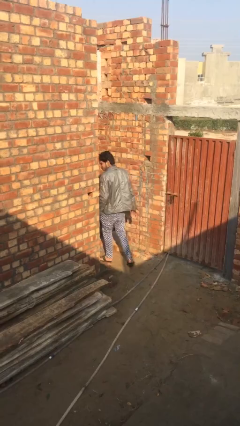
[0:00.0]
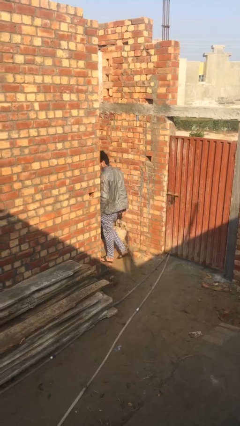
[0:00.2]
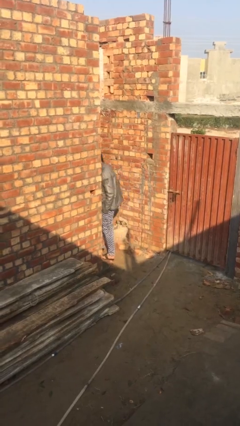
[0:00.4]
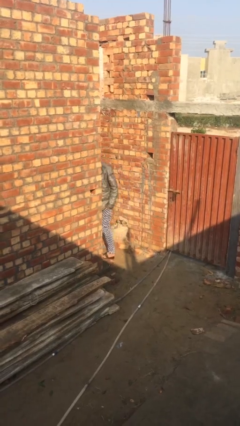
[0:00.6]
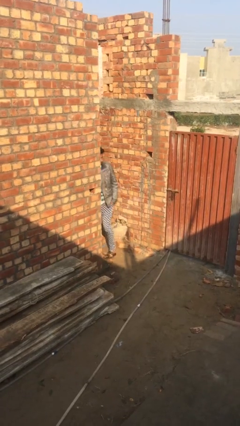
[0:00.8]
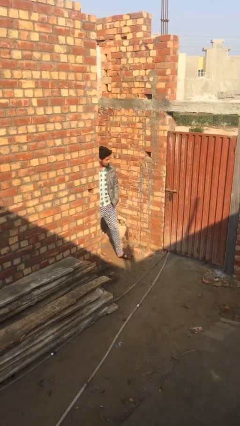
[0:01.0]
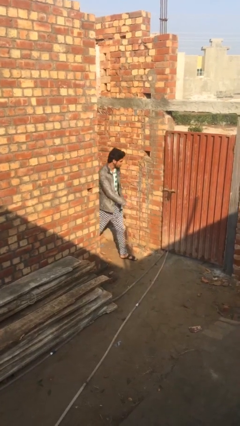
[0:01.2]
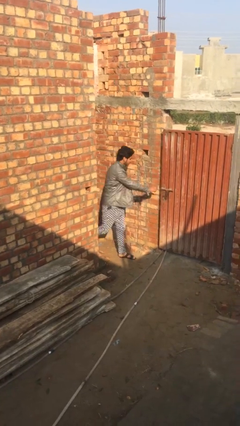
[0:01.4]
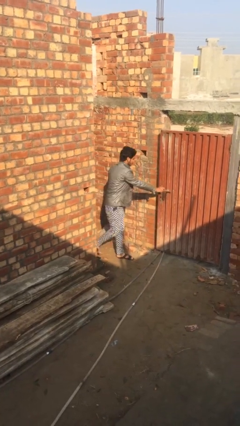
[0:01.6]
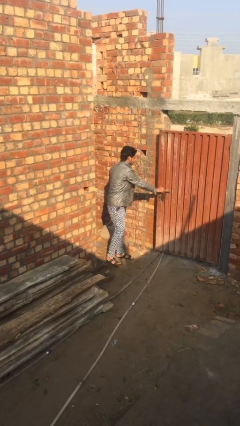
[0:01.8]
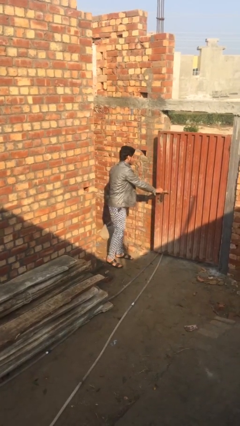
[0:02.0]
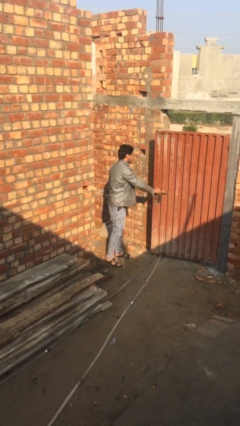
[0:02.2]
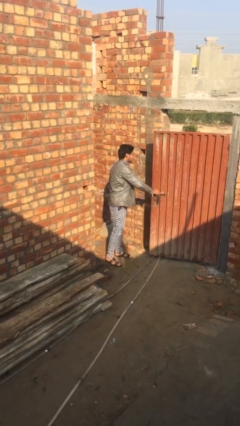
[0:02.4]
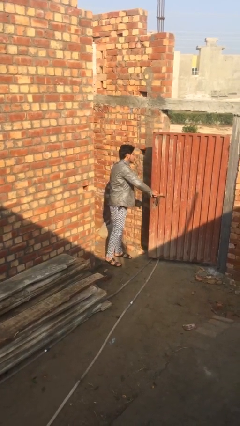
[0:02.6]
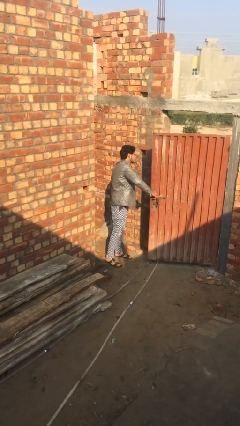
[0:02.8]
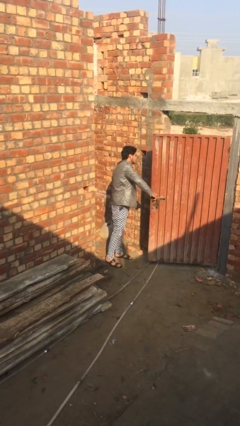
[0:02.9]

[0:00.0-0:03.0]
person opens facility door

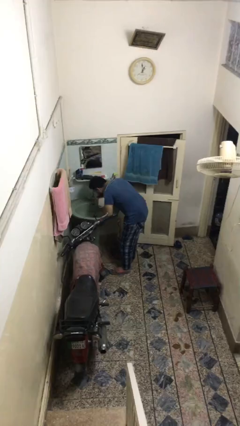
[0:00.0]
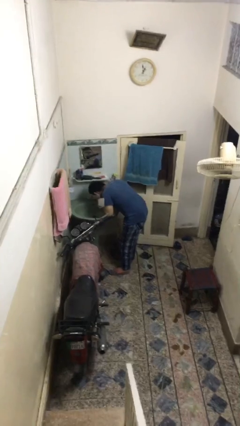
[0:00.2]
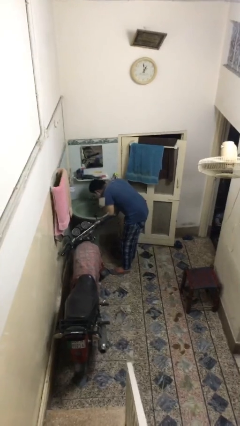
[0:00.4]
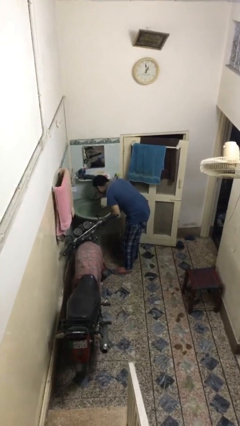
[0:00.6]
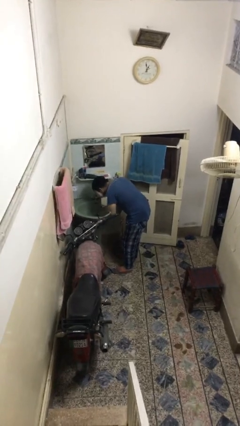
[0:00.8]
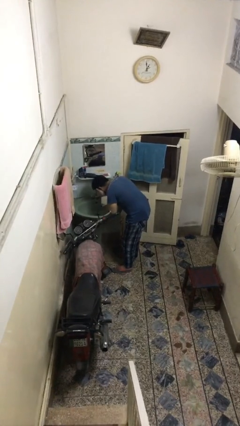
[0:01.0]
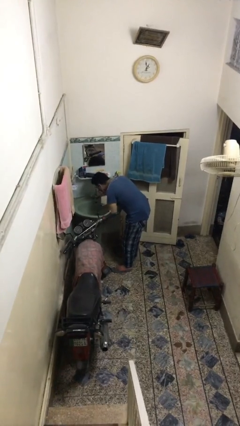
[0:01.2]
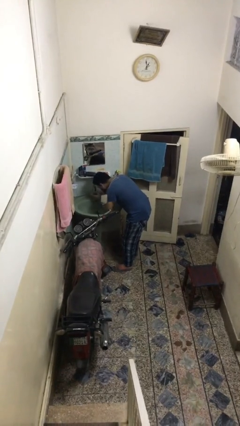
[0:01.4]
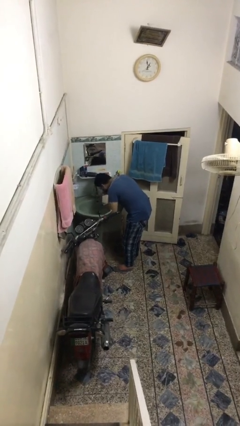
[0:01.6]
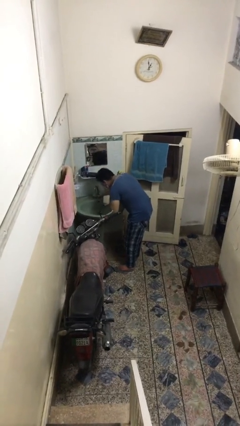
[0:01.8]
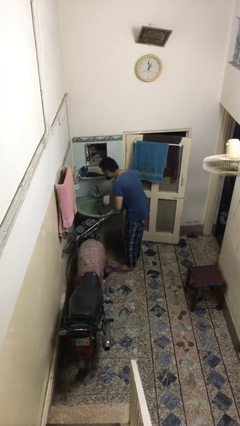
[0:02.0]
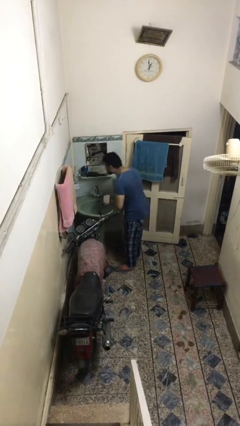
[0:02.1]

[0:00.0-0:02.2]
person washes face

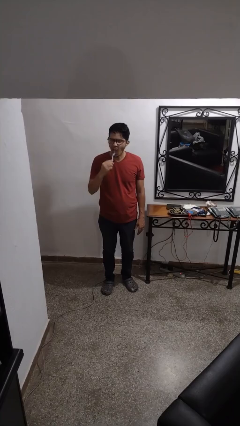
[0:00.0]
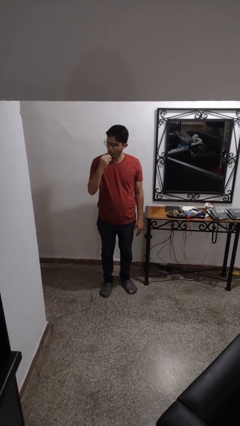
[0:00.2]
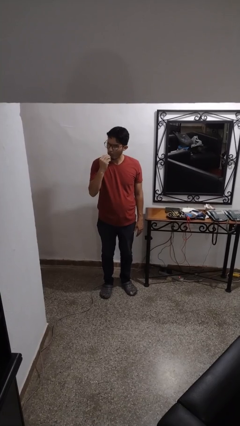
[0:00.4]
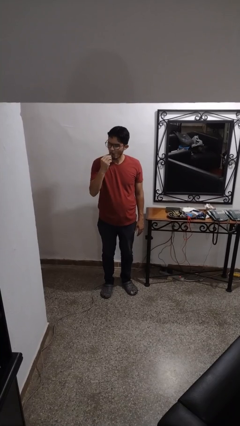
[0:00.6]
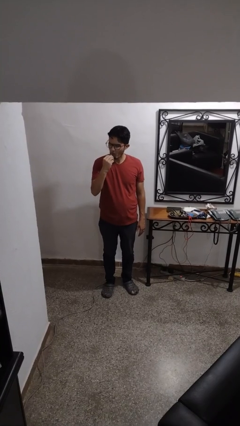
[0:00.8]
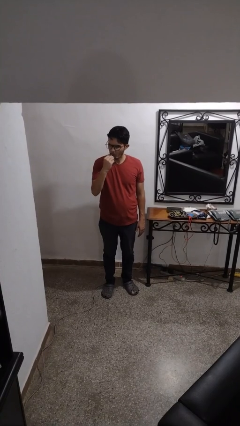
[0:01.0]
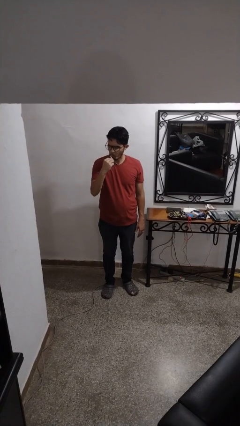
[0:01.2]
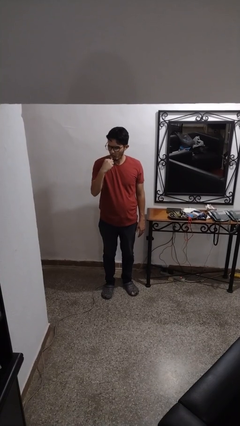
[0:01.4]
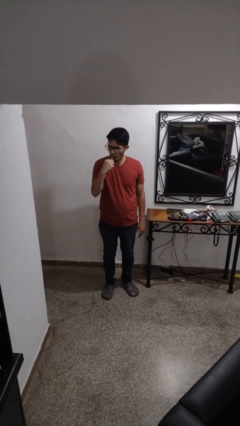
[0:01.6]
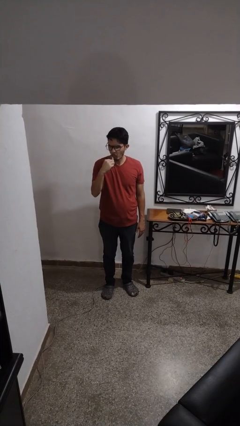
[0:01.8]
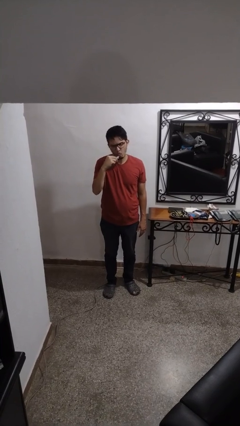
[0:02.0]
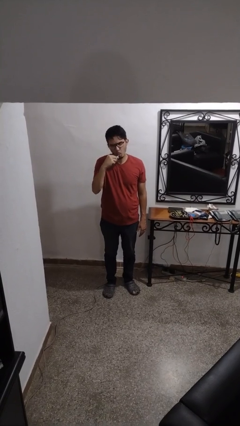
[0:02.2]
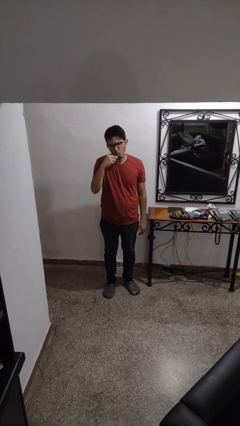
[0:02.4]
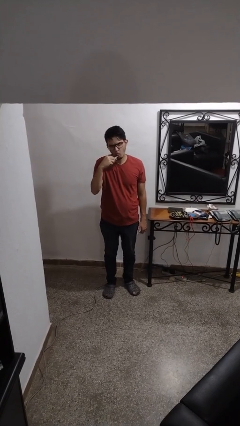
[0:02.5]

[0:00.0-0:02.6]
person brushes teeth

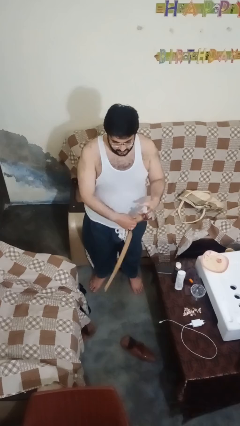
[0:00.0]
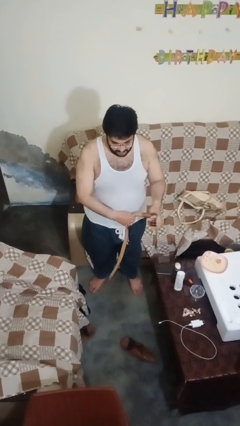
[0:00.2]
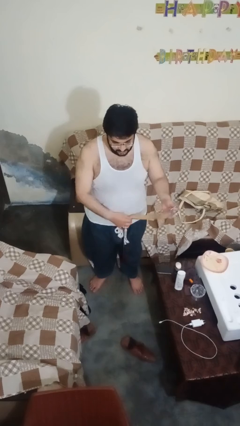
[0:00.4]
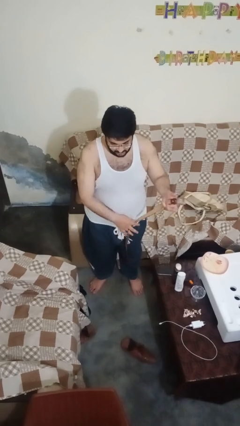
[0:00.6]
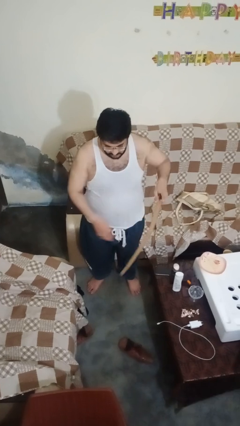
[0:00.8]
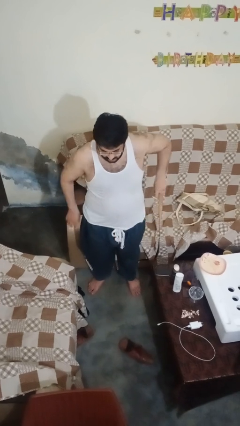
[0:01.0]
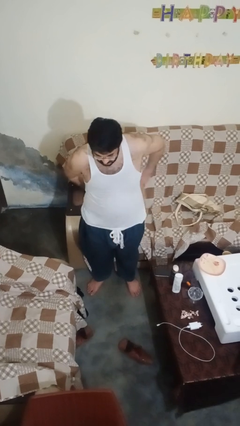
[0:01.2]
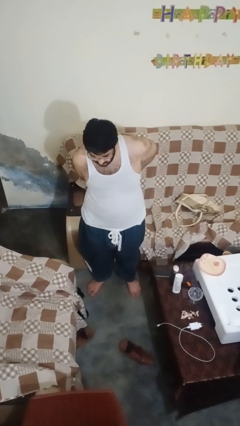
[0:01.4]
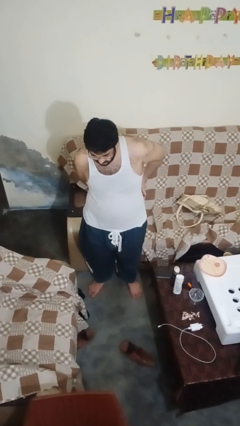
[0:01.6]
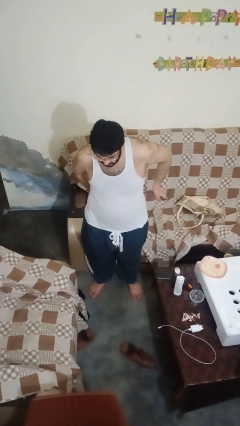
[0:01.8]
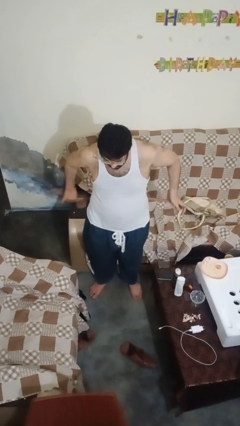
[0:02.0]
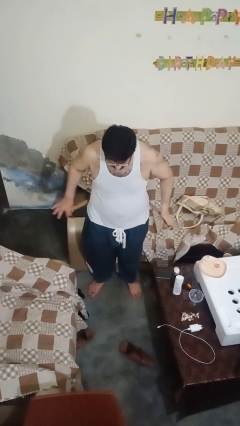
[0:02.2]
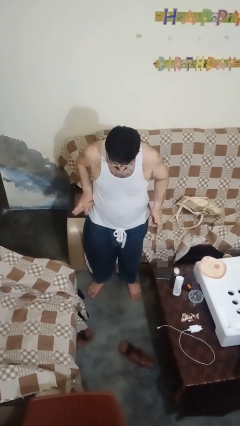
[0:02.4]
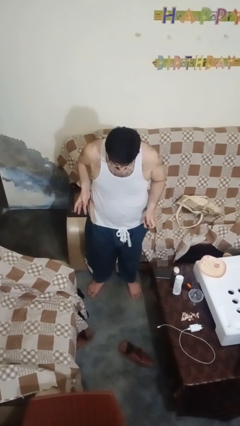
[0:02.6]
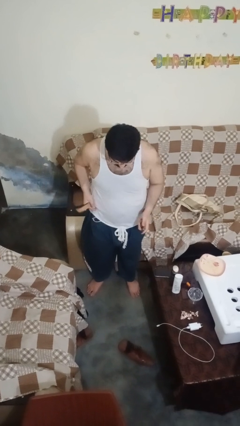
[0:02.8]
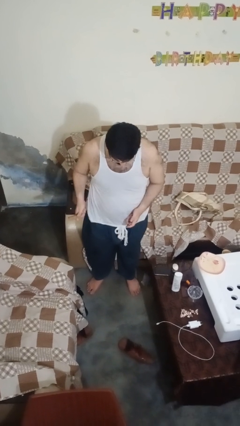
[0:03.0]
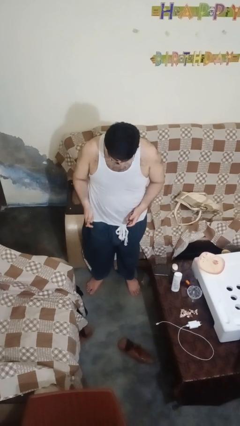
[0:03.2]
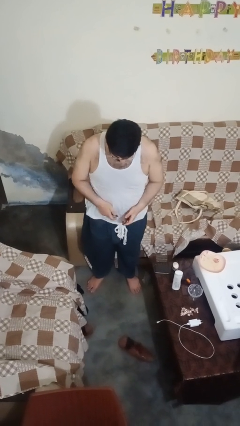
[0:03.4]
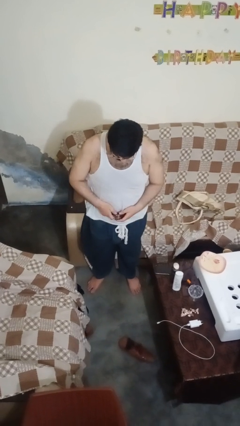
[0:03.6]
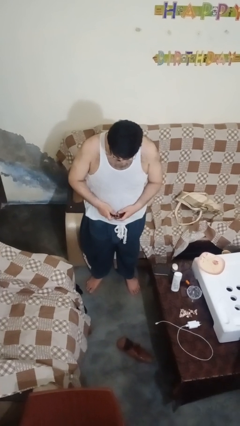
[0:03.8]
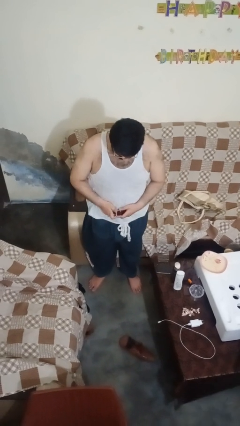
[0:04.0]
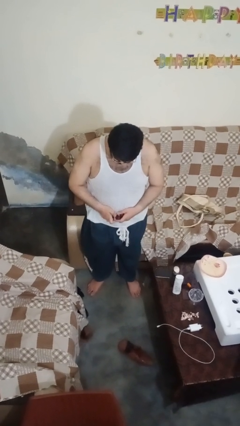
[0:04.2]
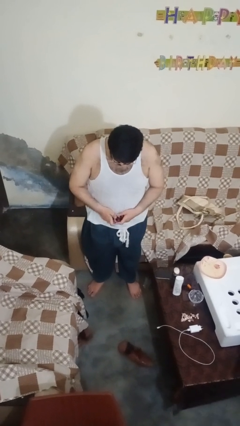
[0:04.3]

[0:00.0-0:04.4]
person puts on belt

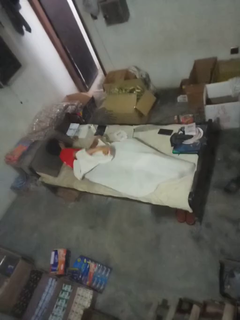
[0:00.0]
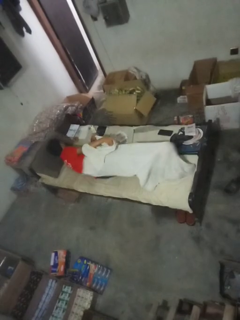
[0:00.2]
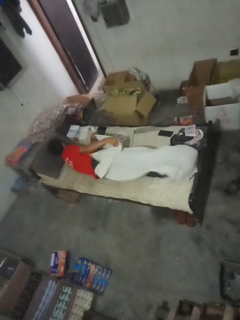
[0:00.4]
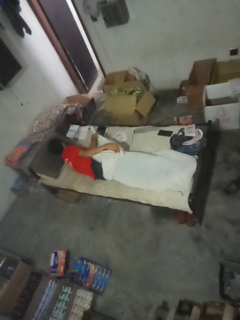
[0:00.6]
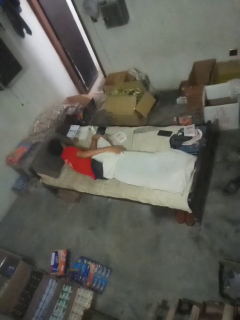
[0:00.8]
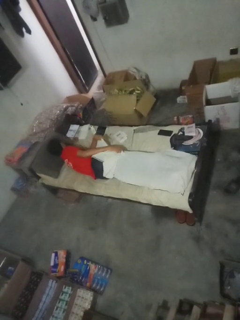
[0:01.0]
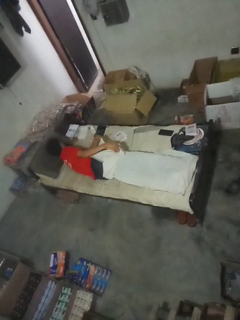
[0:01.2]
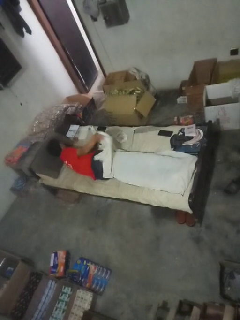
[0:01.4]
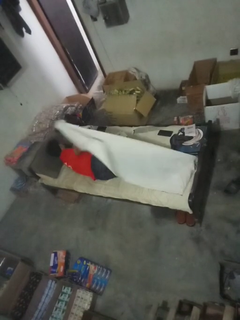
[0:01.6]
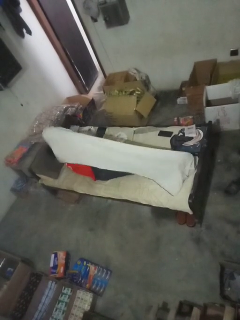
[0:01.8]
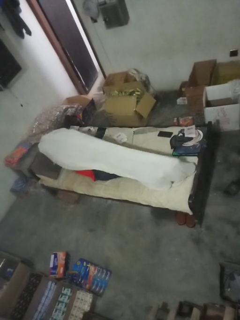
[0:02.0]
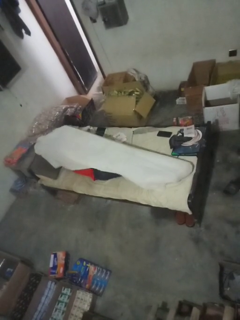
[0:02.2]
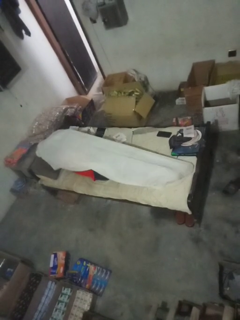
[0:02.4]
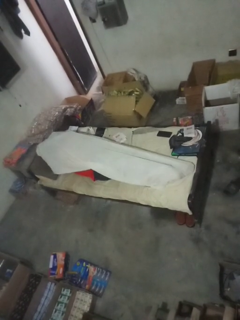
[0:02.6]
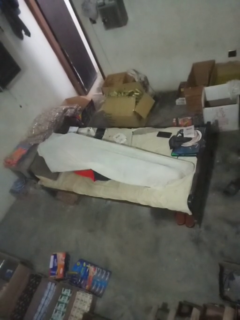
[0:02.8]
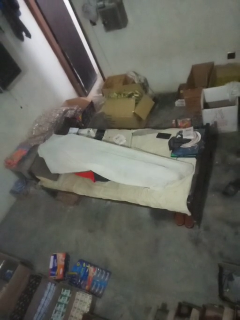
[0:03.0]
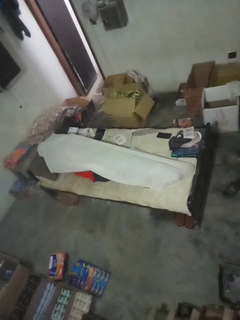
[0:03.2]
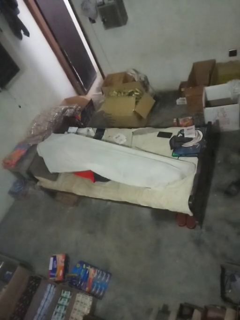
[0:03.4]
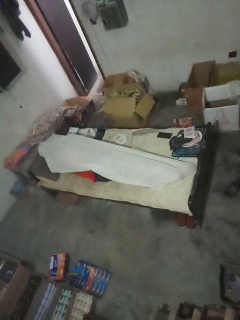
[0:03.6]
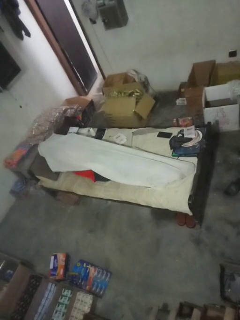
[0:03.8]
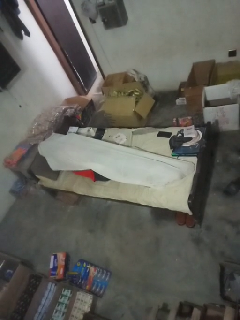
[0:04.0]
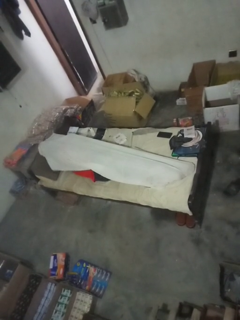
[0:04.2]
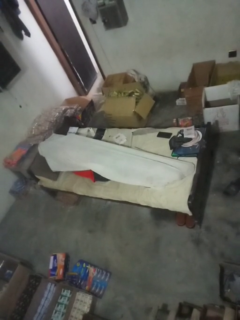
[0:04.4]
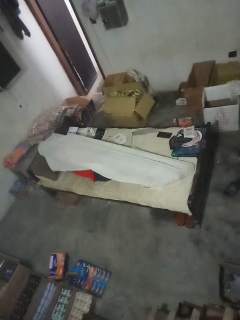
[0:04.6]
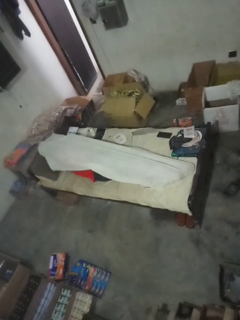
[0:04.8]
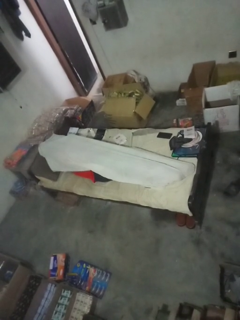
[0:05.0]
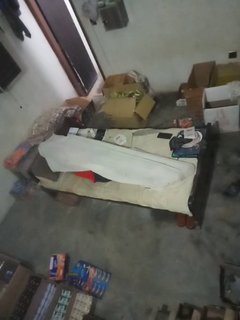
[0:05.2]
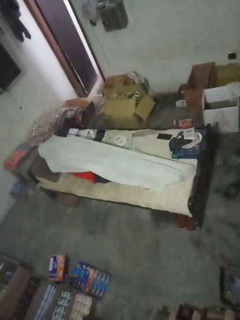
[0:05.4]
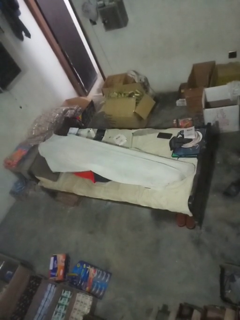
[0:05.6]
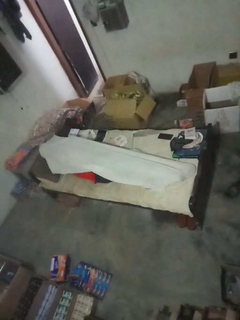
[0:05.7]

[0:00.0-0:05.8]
person covers with bedsheets

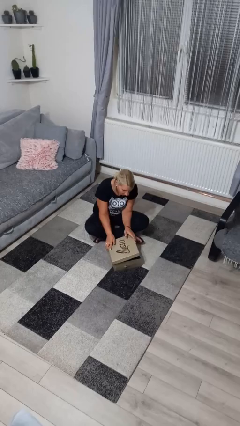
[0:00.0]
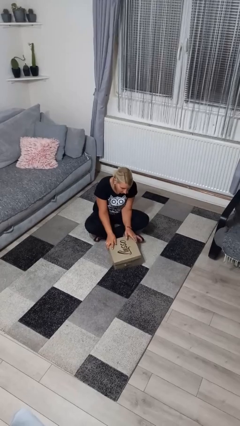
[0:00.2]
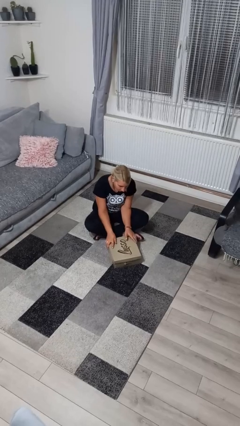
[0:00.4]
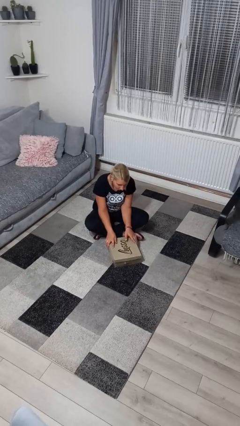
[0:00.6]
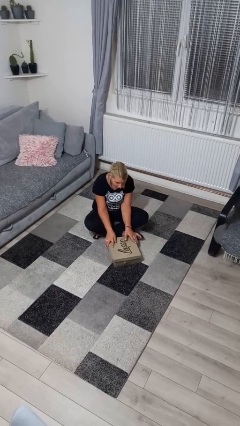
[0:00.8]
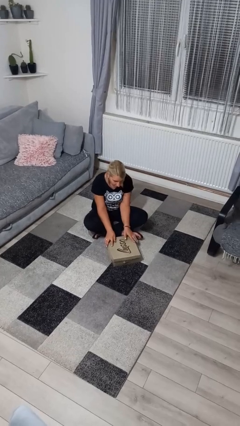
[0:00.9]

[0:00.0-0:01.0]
person closes box
